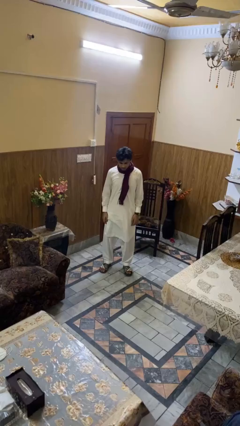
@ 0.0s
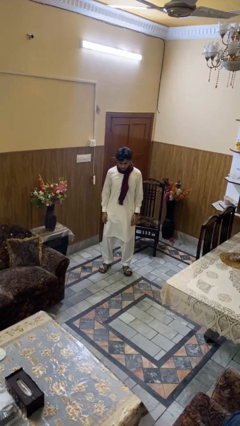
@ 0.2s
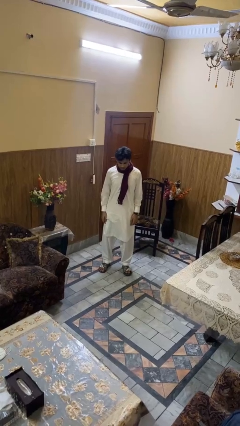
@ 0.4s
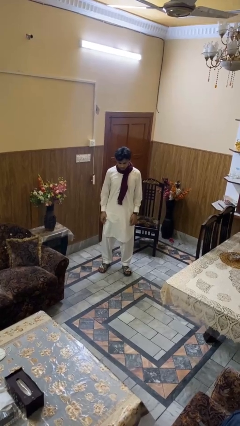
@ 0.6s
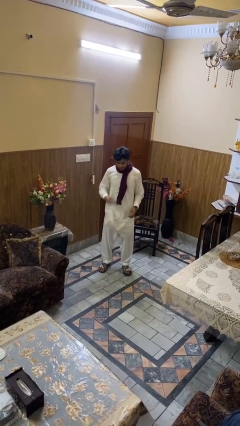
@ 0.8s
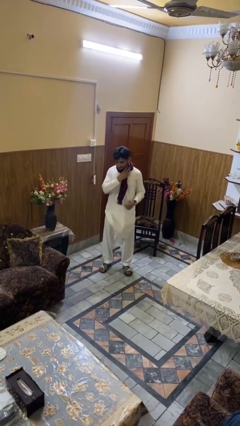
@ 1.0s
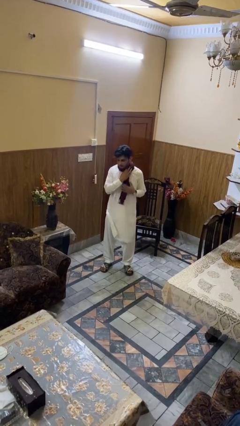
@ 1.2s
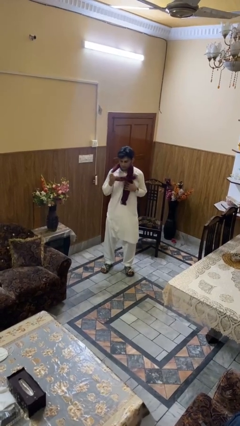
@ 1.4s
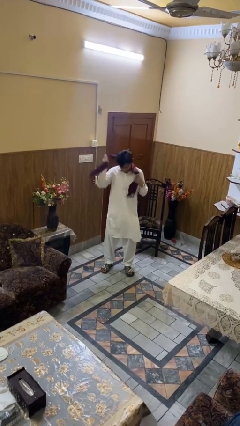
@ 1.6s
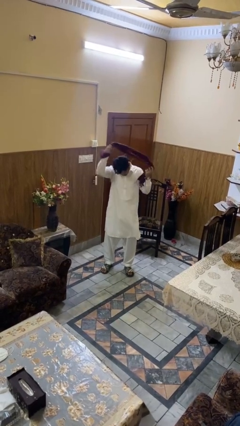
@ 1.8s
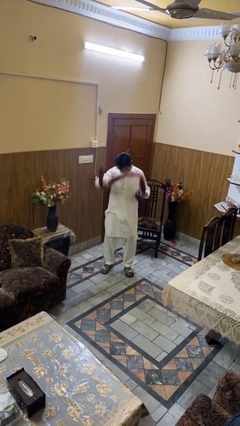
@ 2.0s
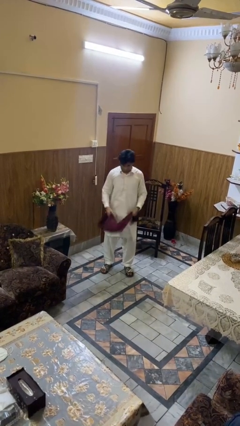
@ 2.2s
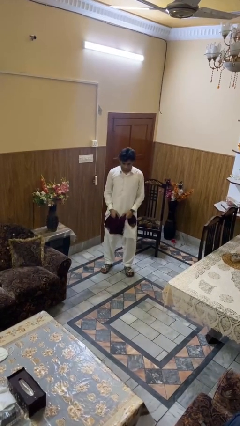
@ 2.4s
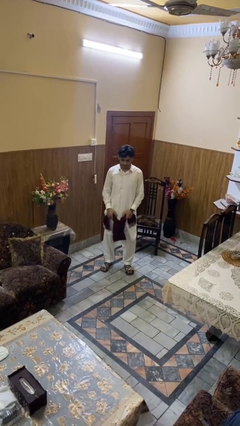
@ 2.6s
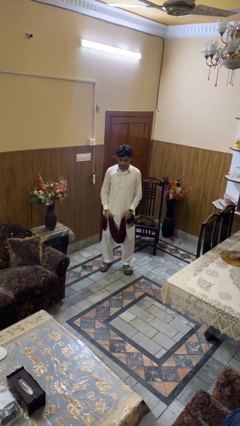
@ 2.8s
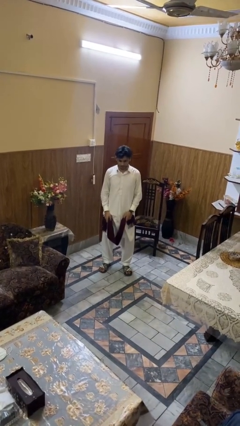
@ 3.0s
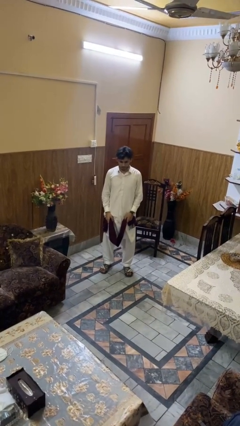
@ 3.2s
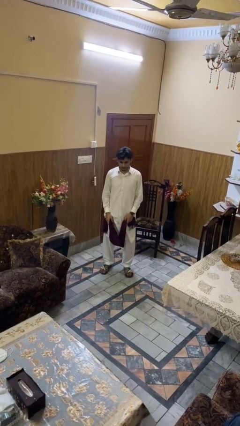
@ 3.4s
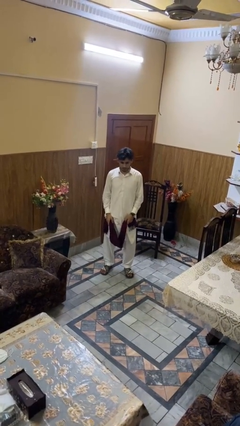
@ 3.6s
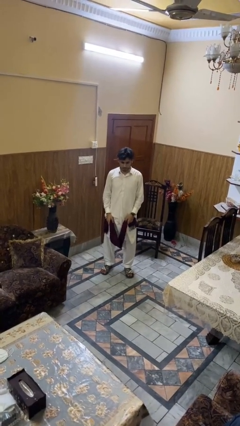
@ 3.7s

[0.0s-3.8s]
person takes off scarf

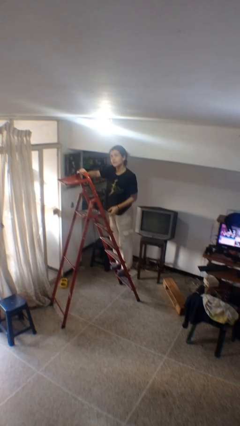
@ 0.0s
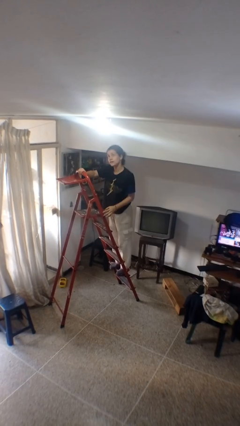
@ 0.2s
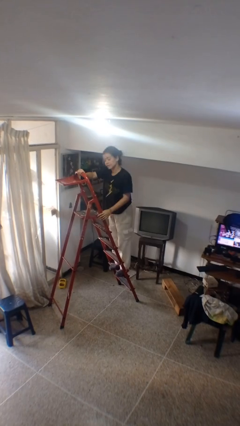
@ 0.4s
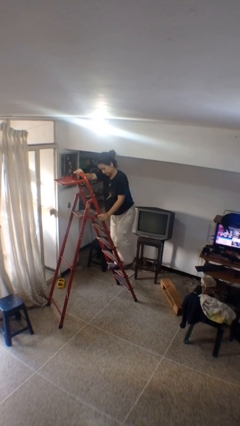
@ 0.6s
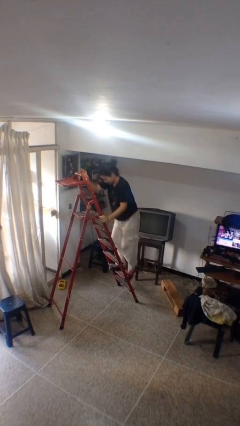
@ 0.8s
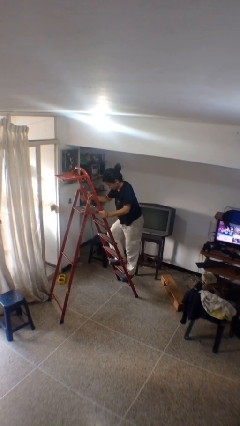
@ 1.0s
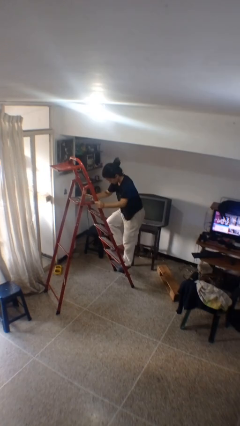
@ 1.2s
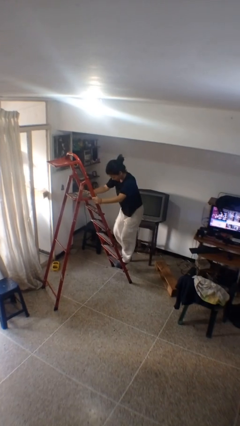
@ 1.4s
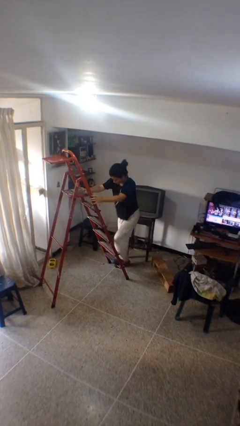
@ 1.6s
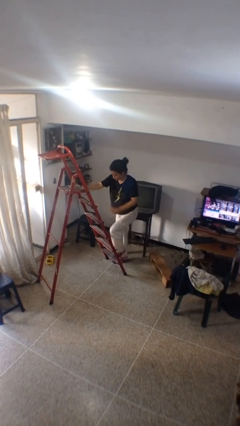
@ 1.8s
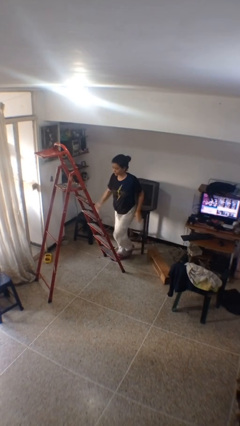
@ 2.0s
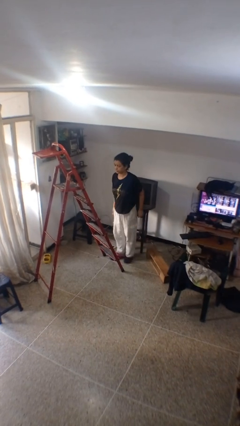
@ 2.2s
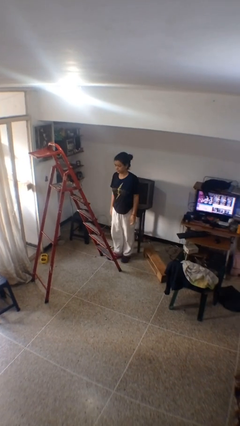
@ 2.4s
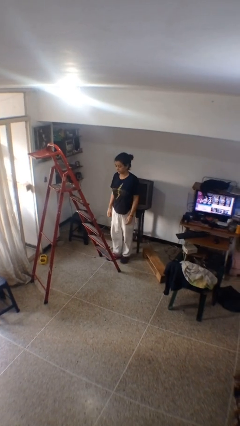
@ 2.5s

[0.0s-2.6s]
person climbs down ladder

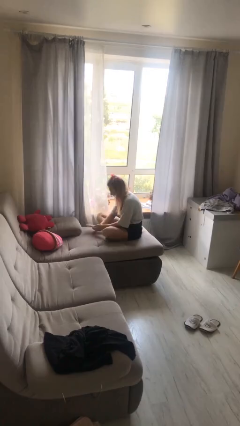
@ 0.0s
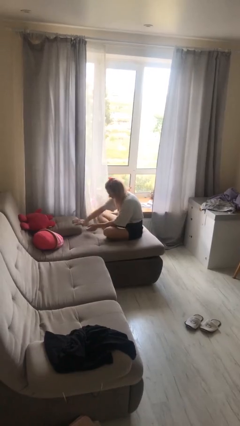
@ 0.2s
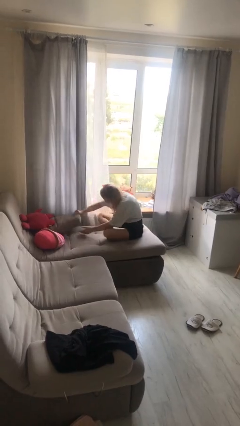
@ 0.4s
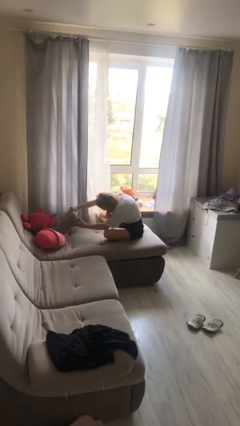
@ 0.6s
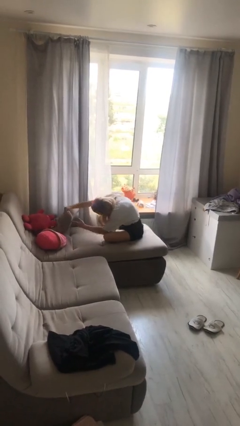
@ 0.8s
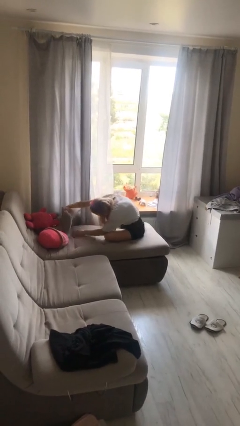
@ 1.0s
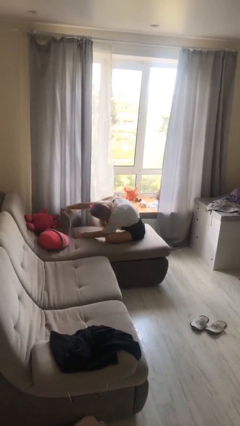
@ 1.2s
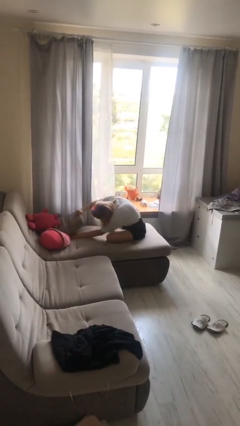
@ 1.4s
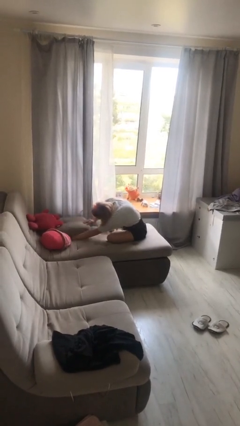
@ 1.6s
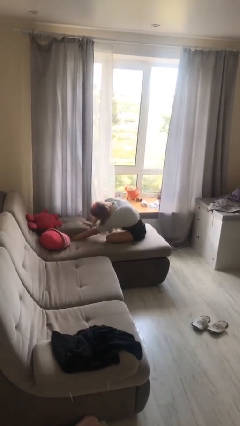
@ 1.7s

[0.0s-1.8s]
person searches under couch

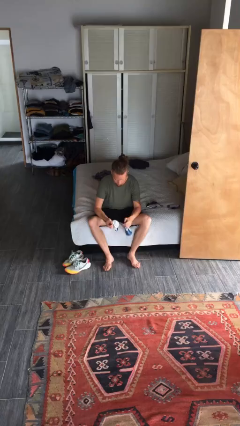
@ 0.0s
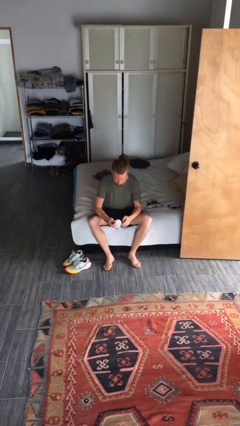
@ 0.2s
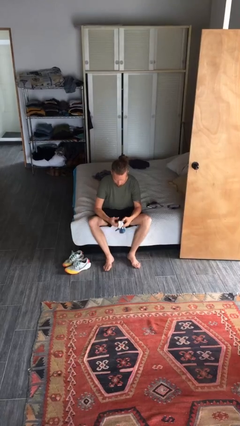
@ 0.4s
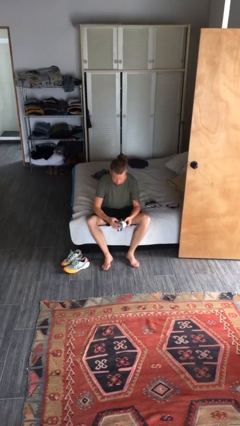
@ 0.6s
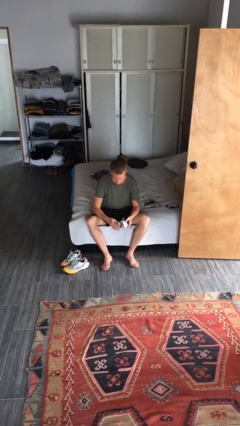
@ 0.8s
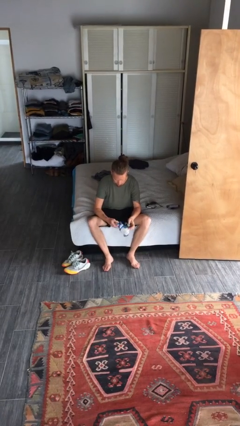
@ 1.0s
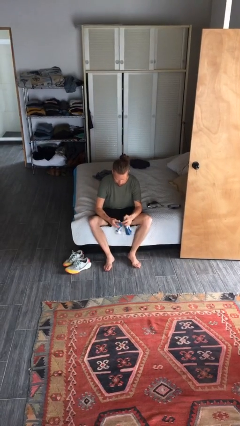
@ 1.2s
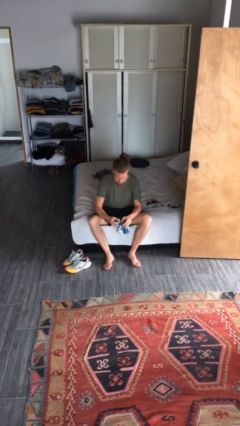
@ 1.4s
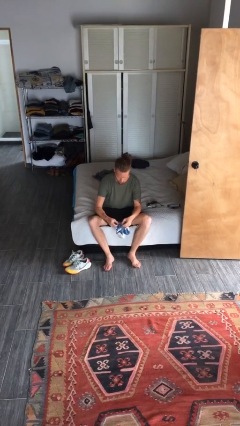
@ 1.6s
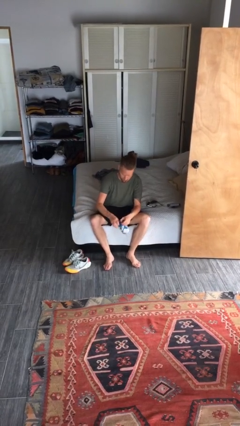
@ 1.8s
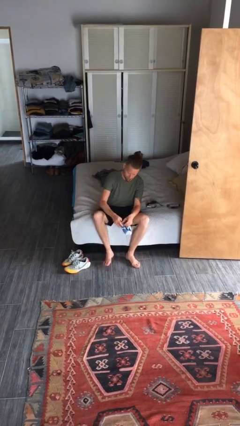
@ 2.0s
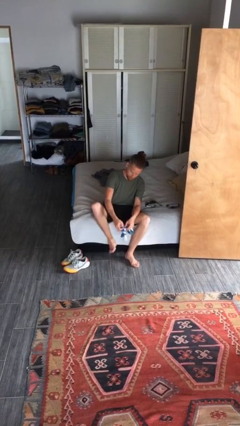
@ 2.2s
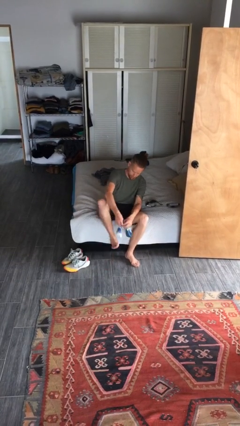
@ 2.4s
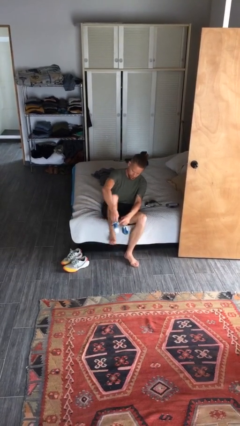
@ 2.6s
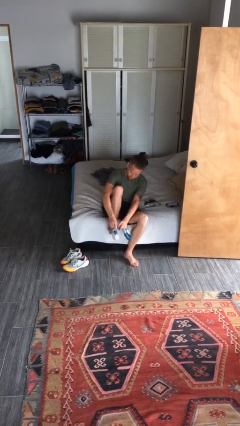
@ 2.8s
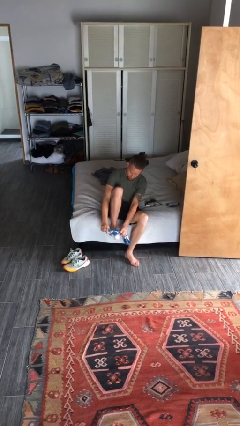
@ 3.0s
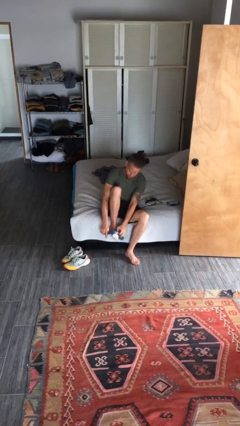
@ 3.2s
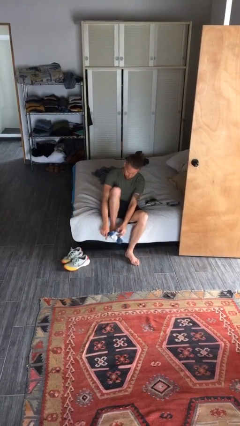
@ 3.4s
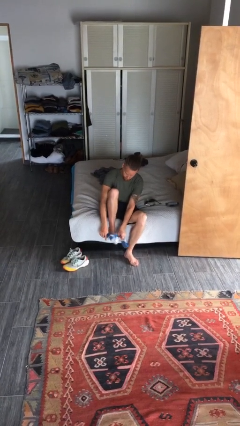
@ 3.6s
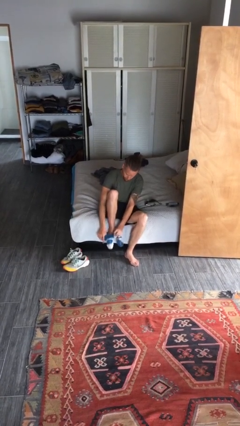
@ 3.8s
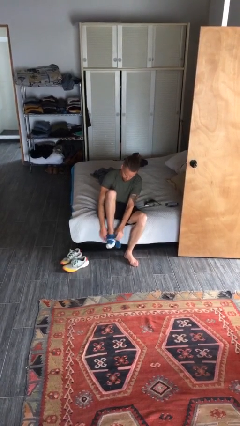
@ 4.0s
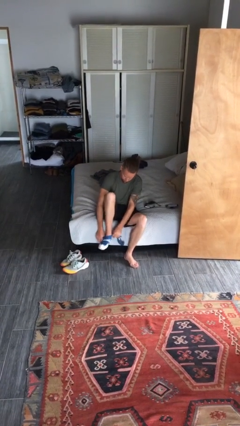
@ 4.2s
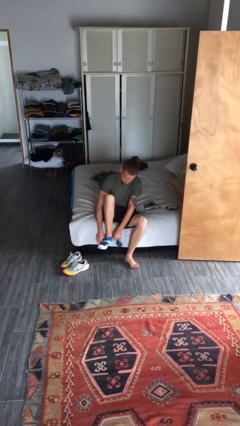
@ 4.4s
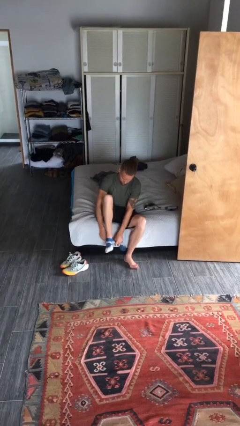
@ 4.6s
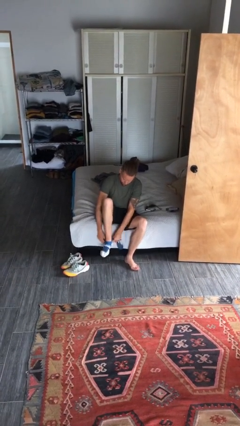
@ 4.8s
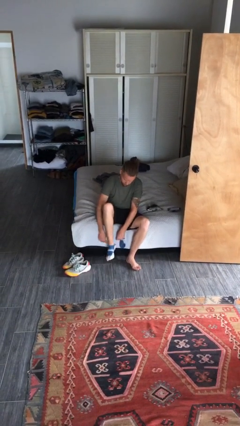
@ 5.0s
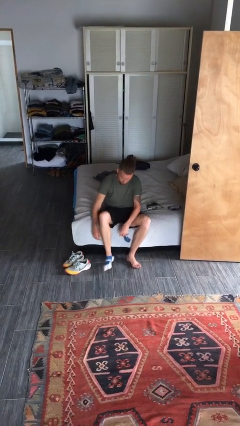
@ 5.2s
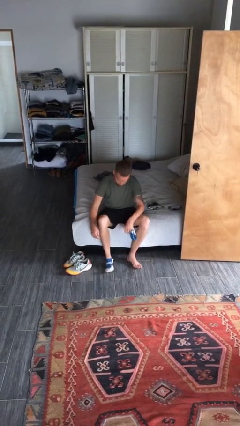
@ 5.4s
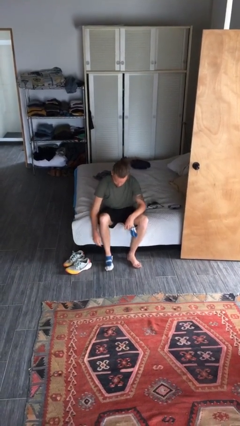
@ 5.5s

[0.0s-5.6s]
person puts on socks

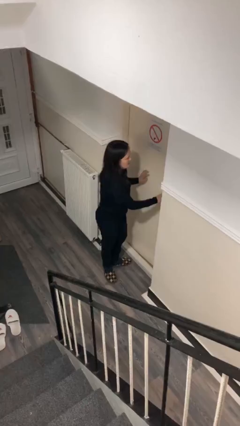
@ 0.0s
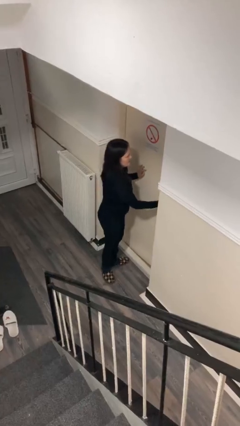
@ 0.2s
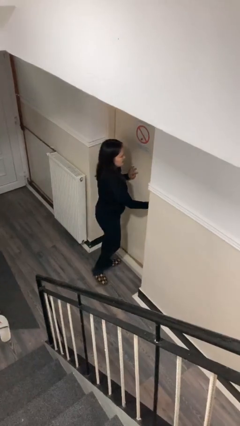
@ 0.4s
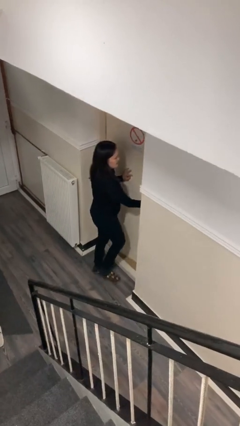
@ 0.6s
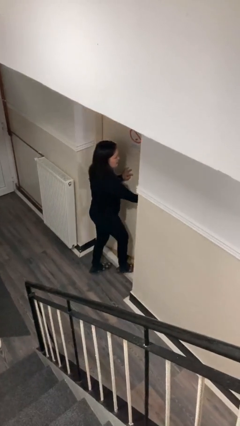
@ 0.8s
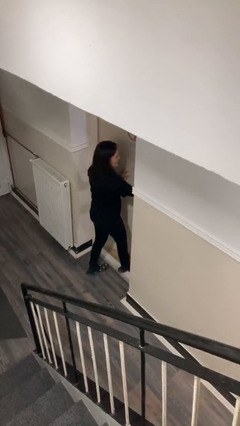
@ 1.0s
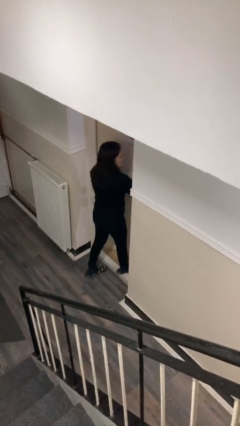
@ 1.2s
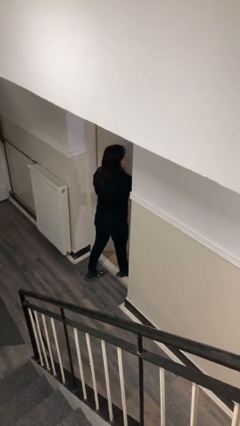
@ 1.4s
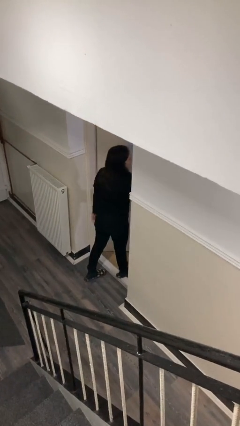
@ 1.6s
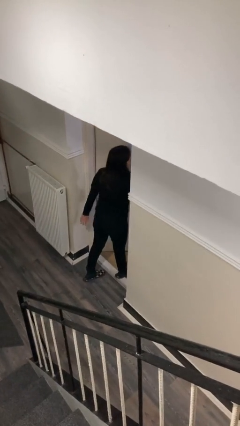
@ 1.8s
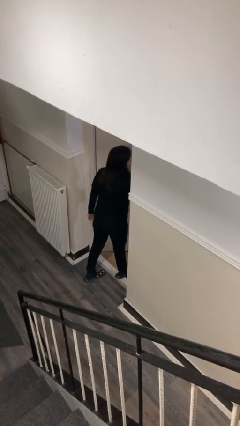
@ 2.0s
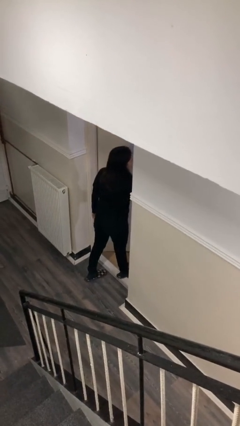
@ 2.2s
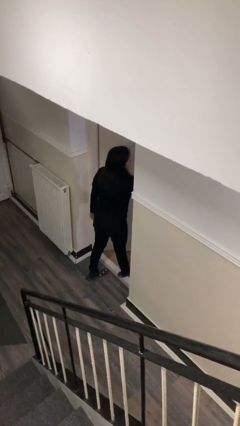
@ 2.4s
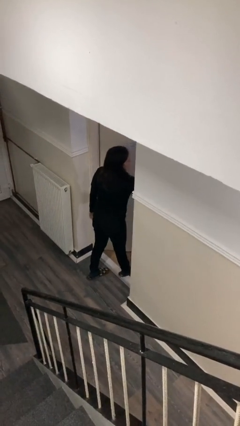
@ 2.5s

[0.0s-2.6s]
person opens facility door

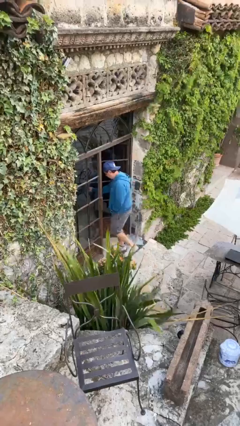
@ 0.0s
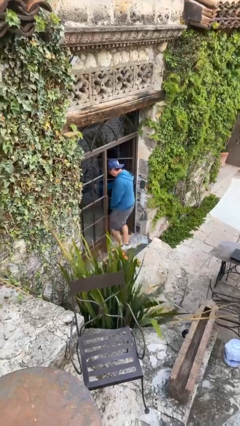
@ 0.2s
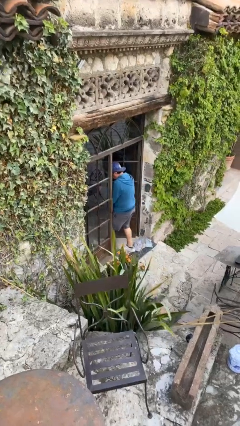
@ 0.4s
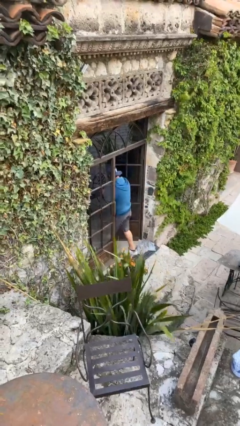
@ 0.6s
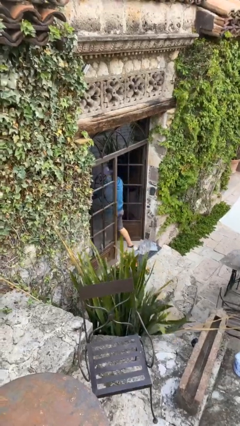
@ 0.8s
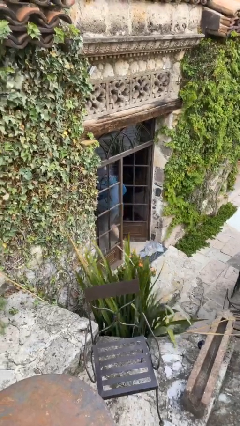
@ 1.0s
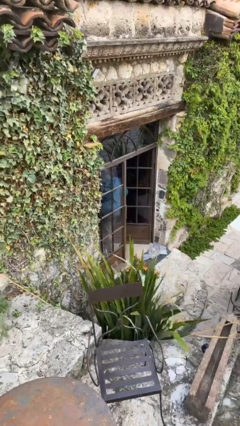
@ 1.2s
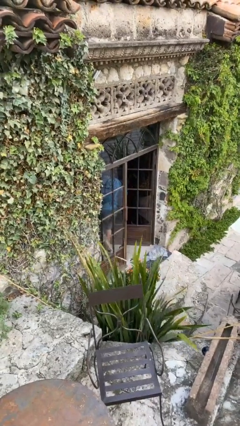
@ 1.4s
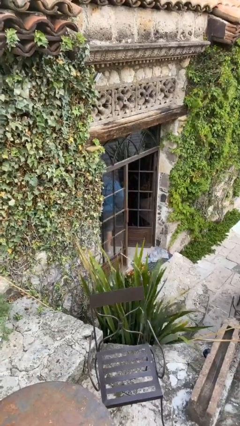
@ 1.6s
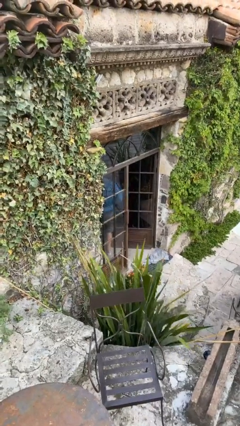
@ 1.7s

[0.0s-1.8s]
person exits scene through structure
